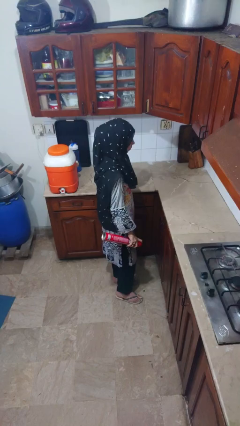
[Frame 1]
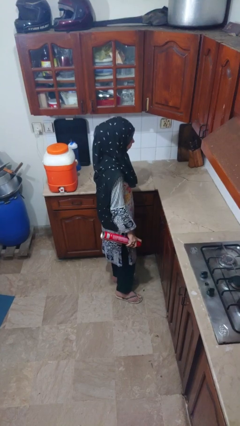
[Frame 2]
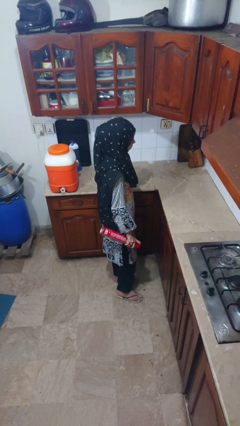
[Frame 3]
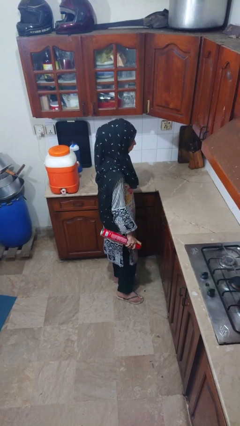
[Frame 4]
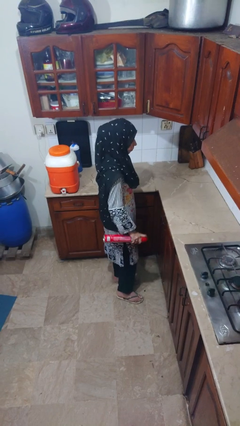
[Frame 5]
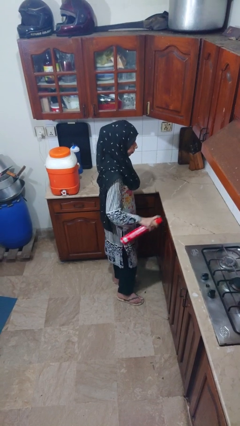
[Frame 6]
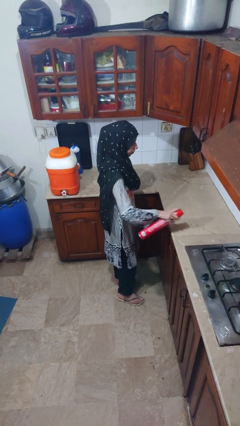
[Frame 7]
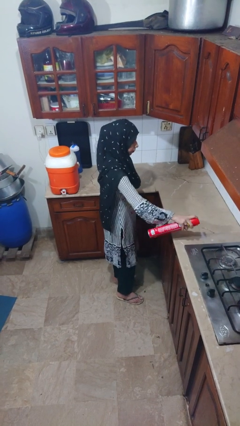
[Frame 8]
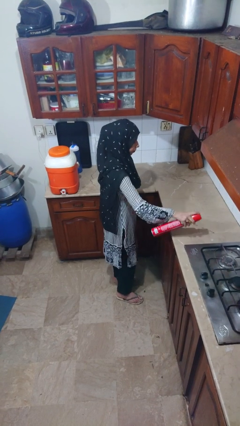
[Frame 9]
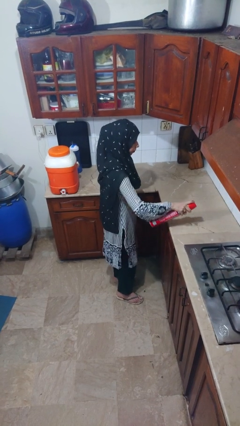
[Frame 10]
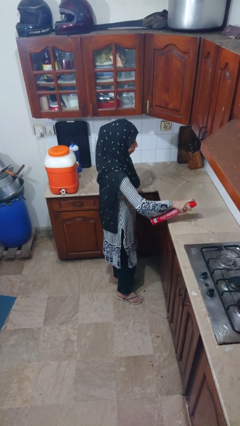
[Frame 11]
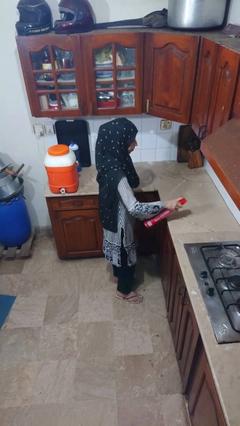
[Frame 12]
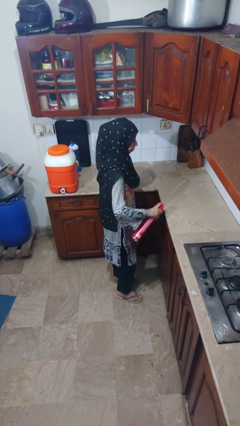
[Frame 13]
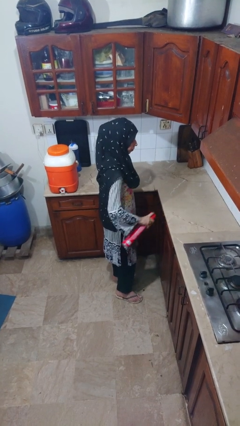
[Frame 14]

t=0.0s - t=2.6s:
person sprays from bottle

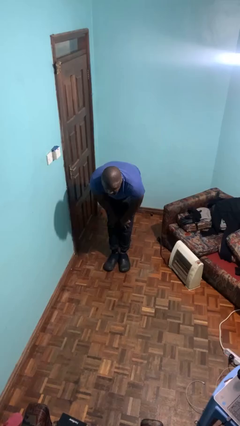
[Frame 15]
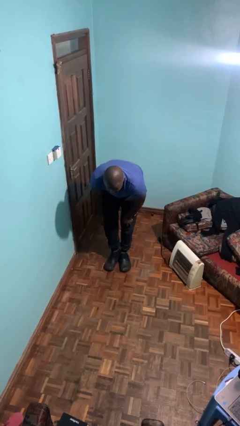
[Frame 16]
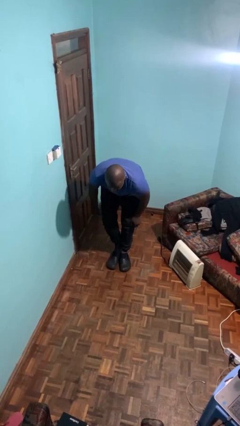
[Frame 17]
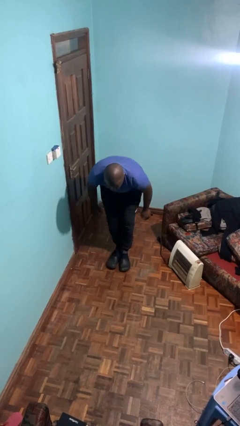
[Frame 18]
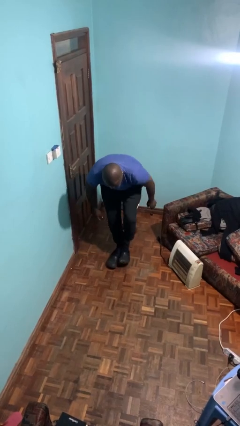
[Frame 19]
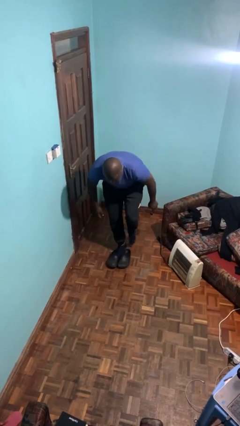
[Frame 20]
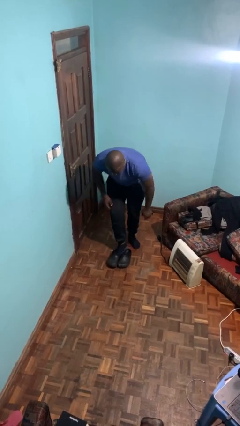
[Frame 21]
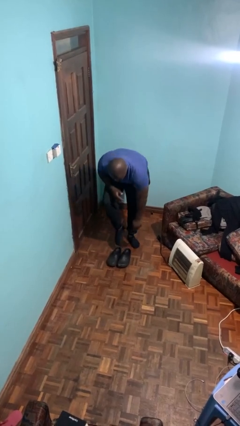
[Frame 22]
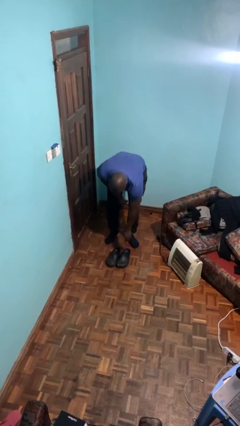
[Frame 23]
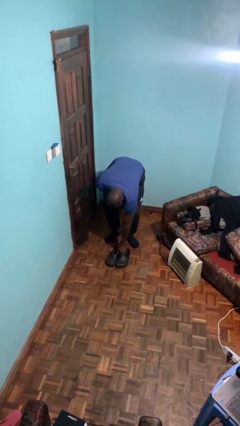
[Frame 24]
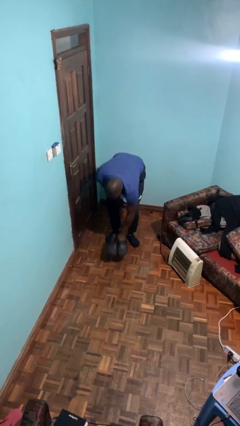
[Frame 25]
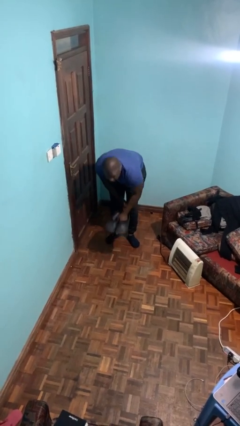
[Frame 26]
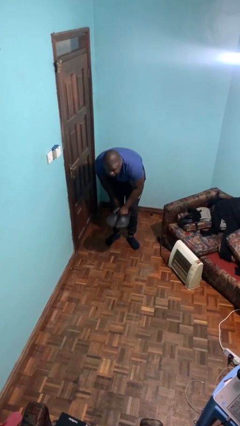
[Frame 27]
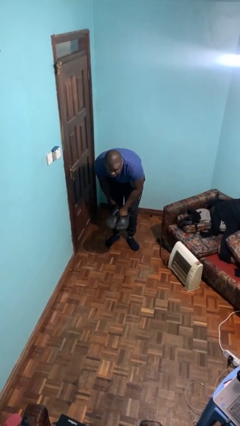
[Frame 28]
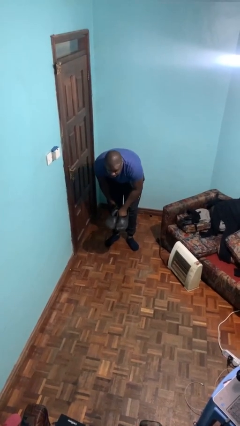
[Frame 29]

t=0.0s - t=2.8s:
person takes off shoes

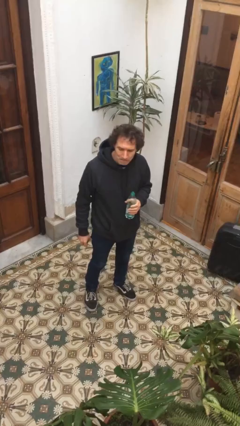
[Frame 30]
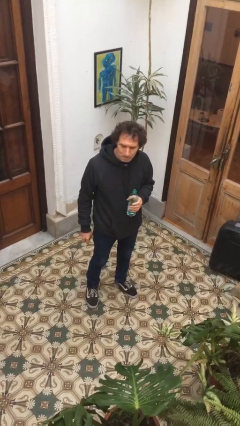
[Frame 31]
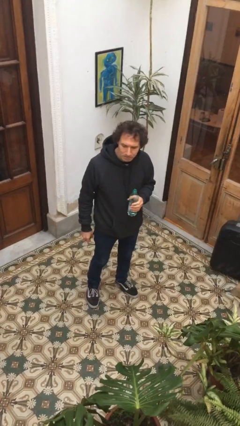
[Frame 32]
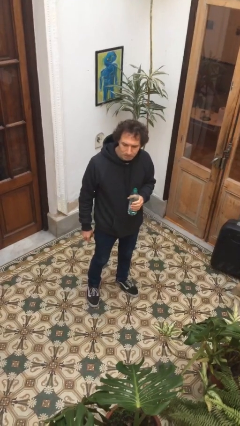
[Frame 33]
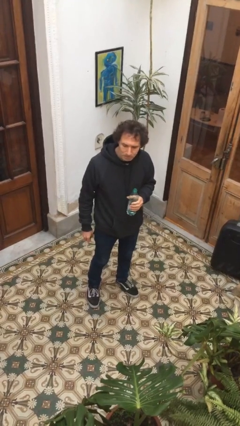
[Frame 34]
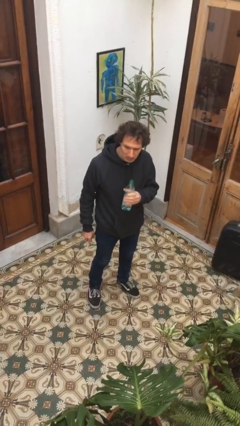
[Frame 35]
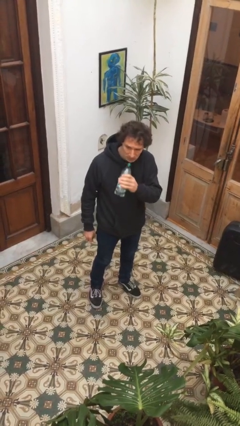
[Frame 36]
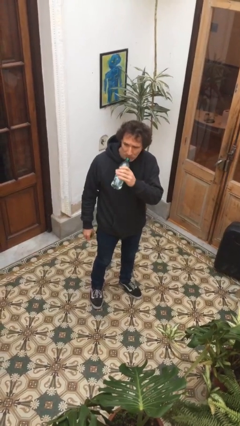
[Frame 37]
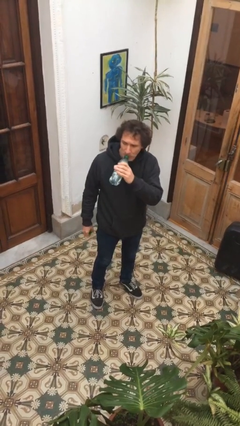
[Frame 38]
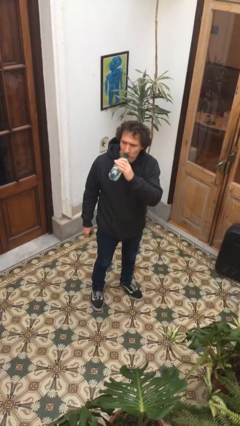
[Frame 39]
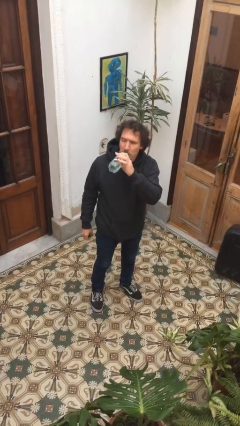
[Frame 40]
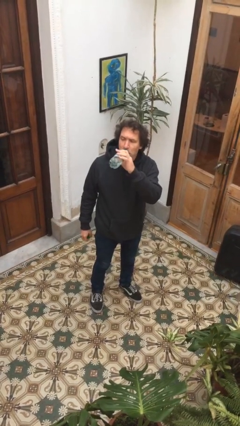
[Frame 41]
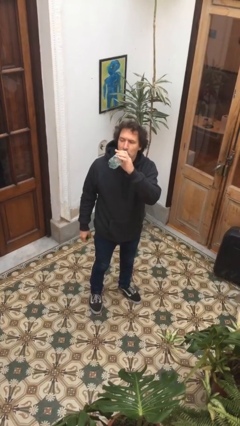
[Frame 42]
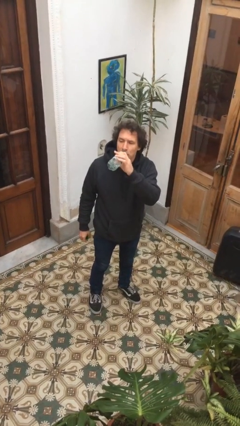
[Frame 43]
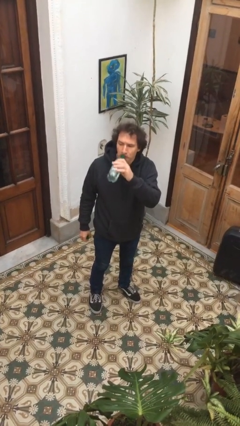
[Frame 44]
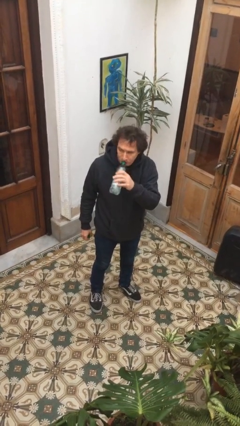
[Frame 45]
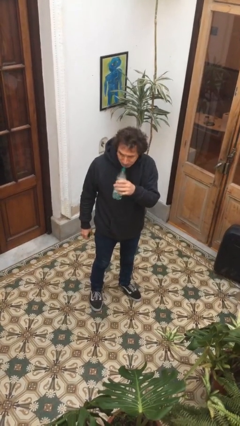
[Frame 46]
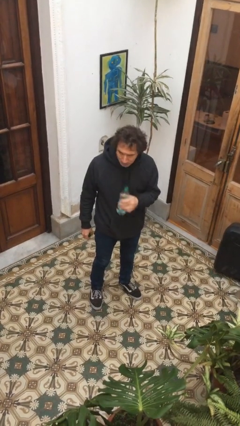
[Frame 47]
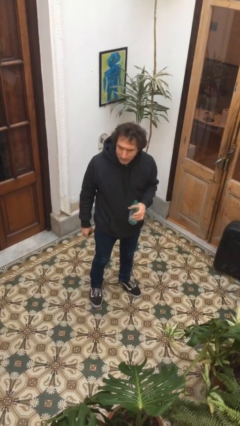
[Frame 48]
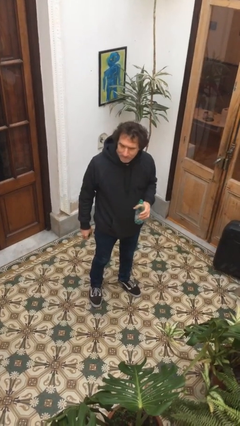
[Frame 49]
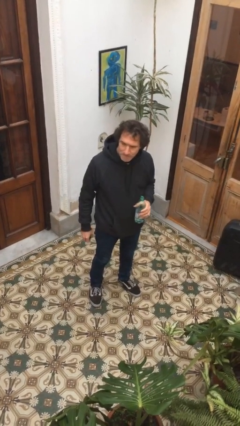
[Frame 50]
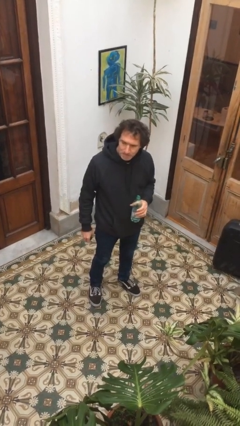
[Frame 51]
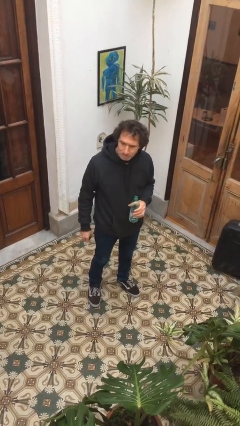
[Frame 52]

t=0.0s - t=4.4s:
person drinks from bottle

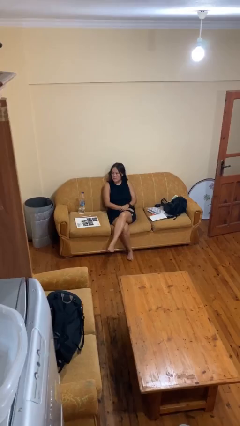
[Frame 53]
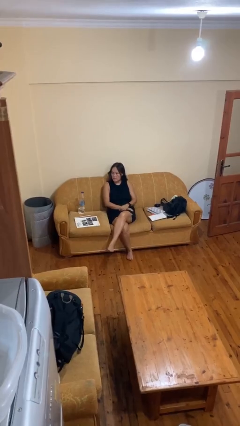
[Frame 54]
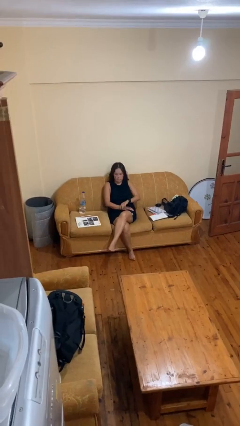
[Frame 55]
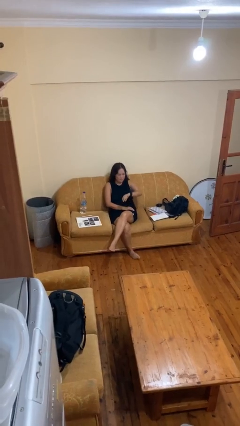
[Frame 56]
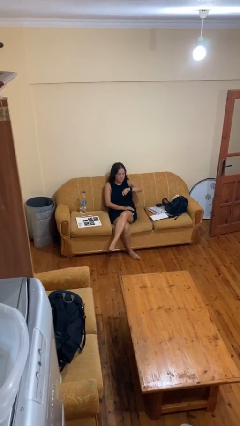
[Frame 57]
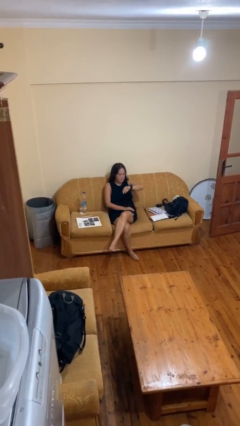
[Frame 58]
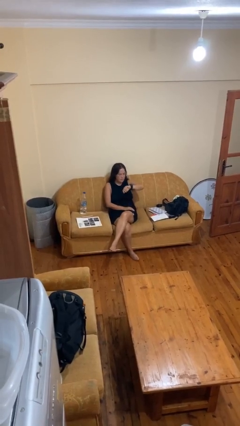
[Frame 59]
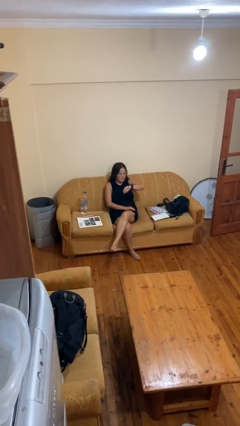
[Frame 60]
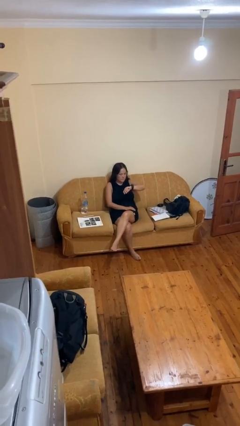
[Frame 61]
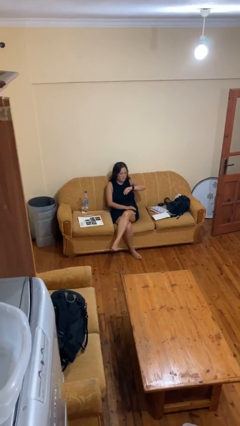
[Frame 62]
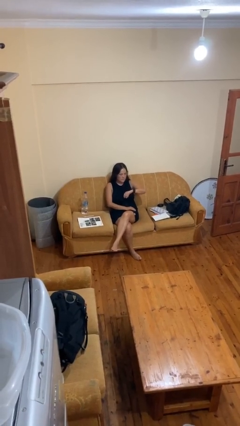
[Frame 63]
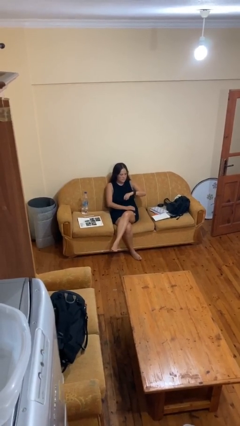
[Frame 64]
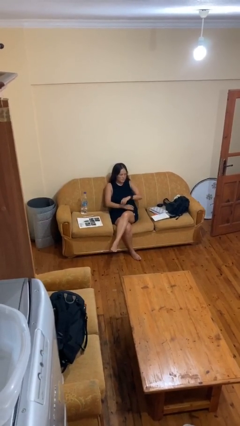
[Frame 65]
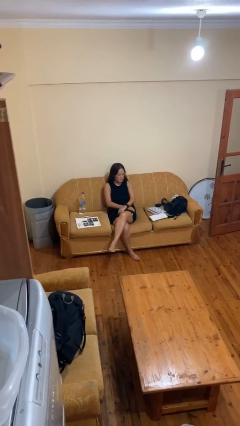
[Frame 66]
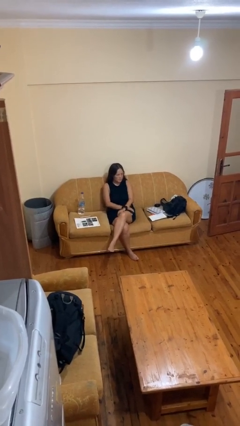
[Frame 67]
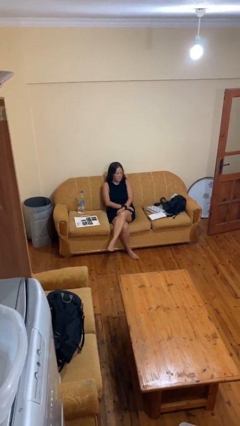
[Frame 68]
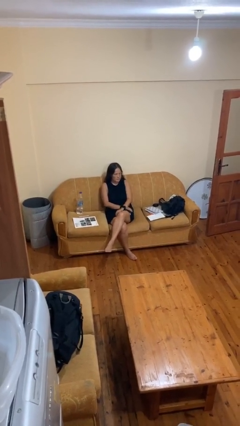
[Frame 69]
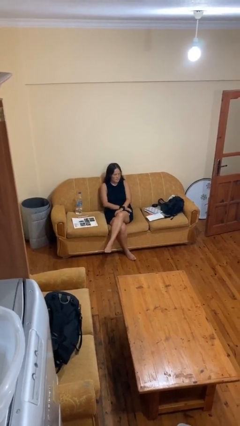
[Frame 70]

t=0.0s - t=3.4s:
person looks at wristwatch

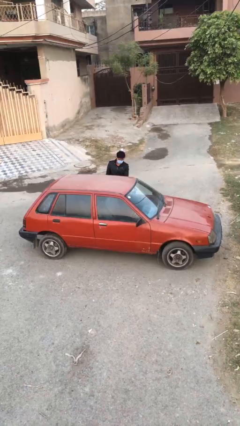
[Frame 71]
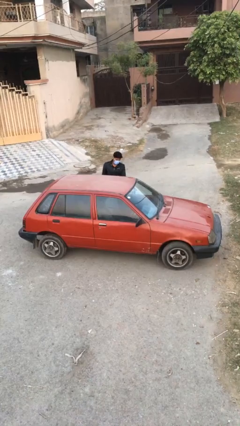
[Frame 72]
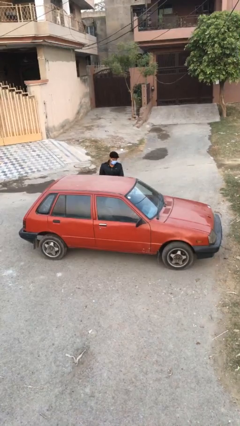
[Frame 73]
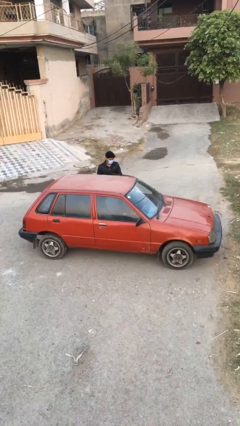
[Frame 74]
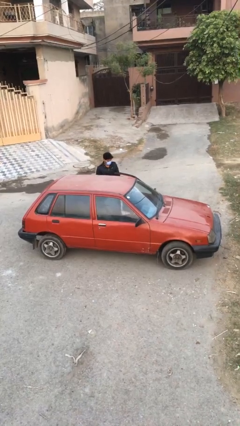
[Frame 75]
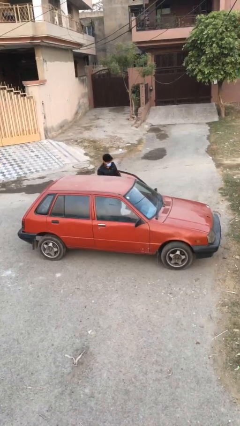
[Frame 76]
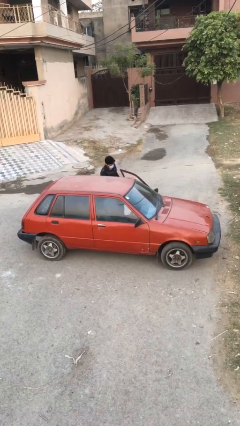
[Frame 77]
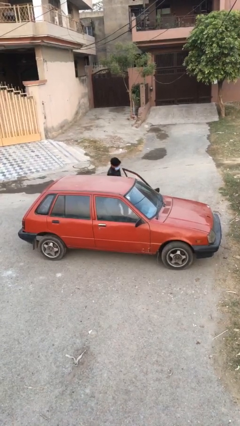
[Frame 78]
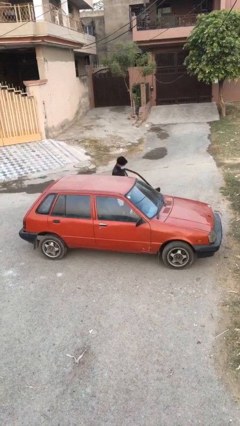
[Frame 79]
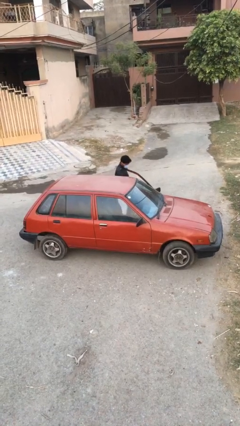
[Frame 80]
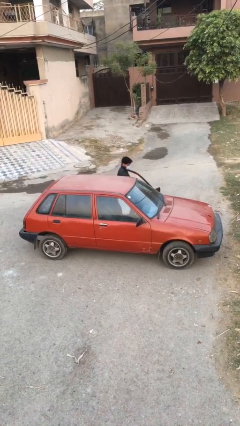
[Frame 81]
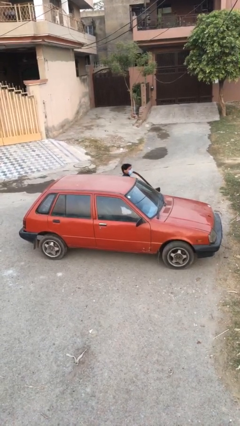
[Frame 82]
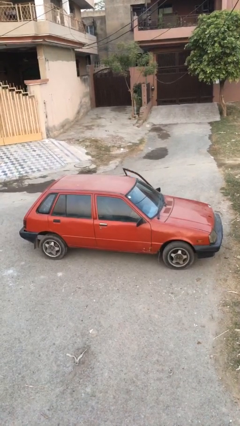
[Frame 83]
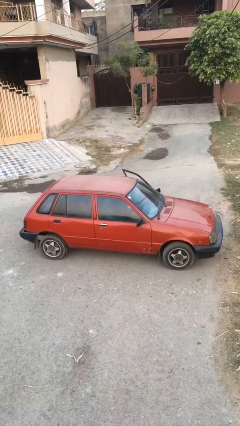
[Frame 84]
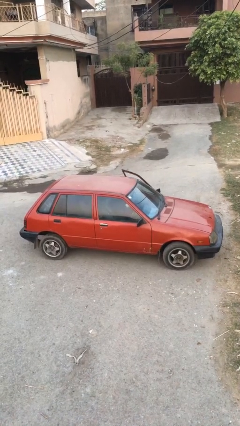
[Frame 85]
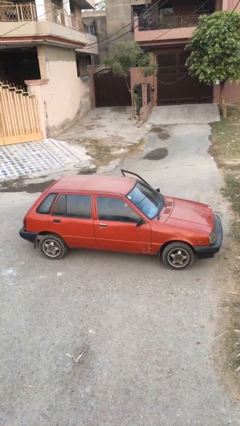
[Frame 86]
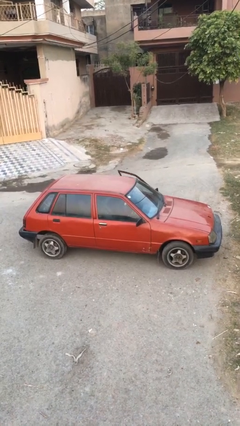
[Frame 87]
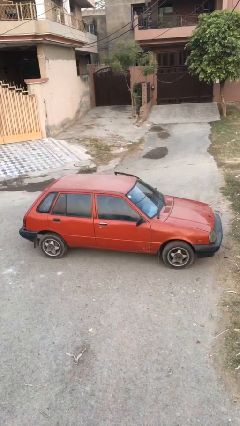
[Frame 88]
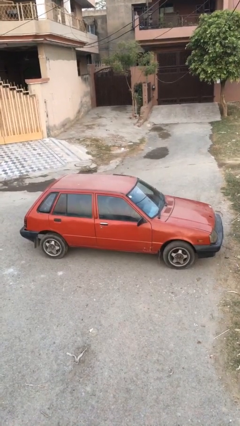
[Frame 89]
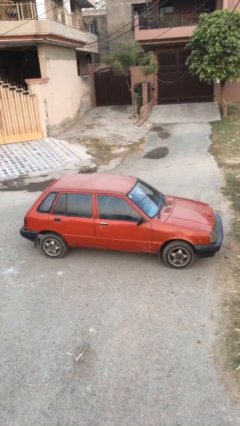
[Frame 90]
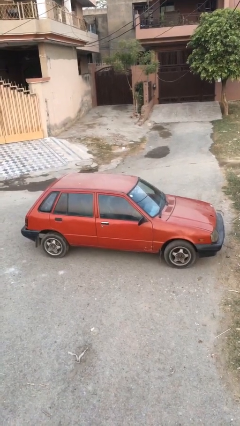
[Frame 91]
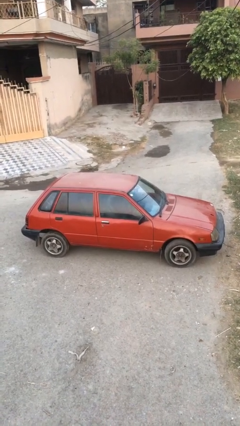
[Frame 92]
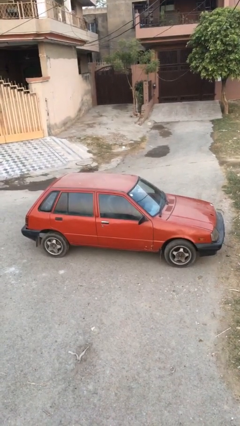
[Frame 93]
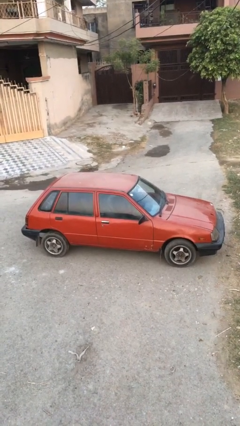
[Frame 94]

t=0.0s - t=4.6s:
car picks up person
